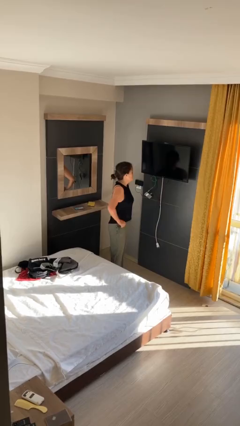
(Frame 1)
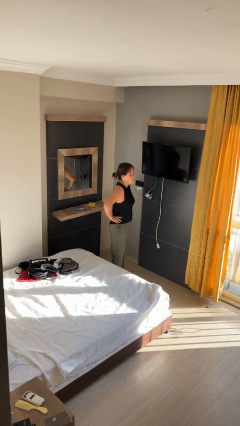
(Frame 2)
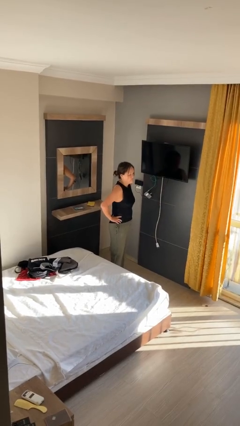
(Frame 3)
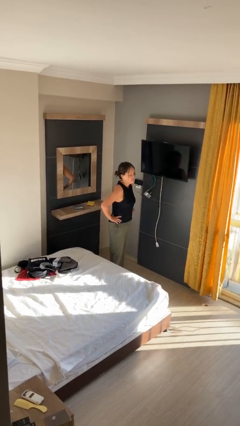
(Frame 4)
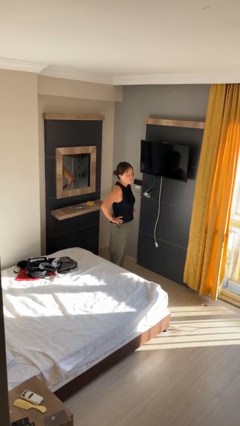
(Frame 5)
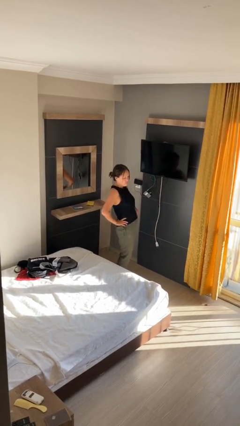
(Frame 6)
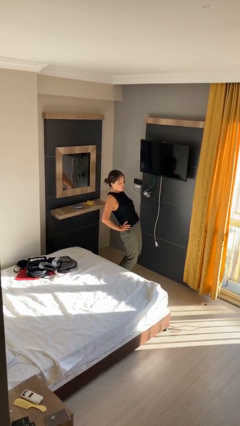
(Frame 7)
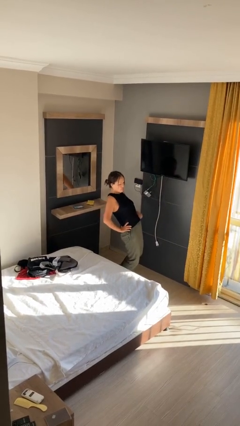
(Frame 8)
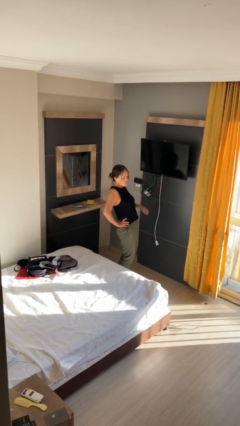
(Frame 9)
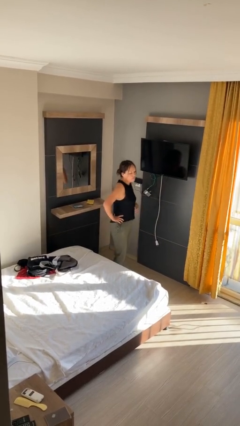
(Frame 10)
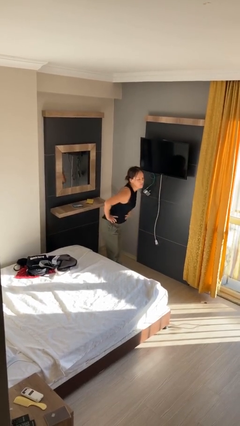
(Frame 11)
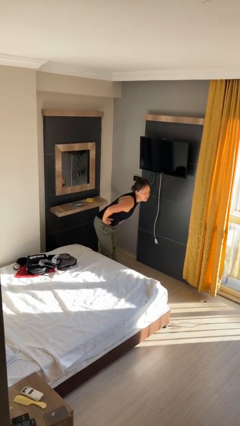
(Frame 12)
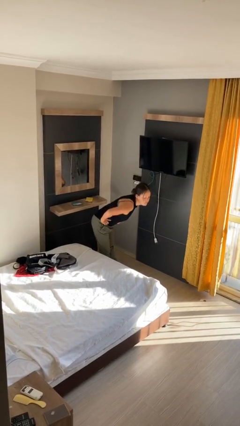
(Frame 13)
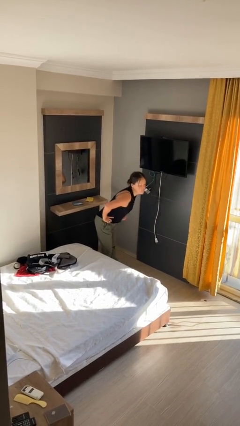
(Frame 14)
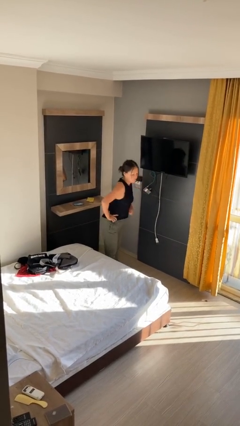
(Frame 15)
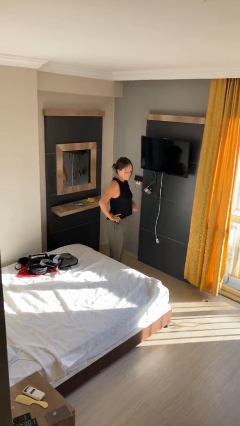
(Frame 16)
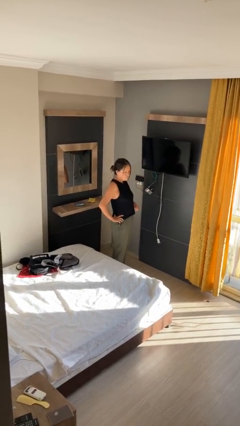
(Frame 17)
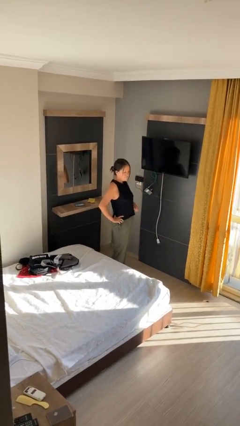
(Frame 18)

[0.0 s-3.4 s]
person wiggles hips

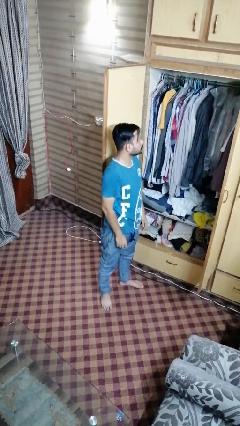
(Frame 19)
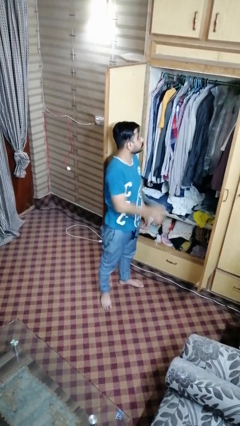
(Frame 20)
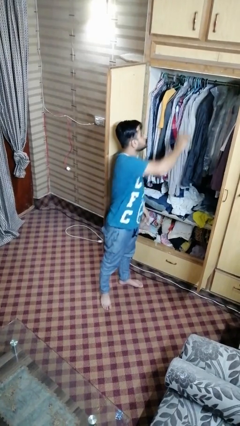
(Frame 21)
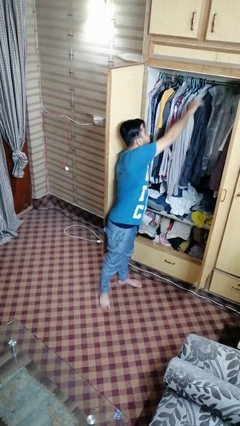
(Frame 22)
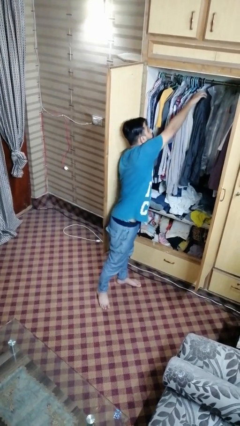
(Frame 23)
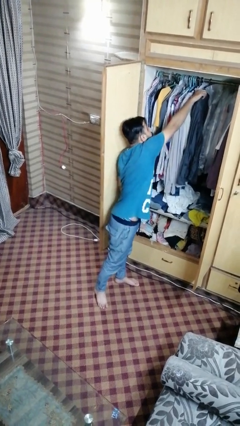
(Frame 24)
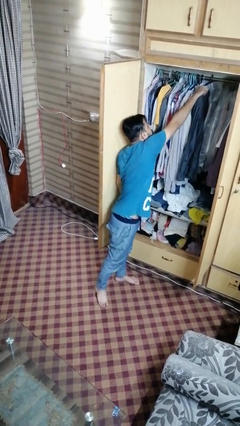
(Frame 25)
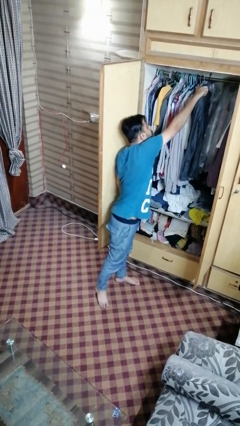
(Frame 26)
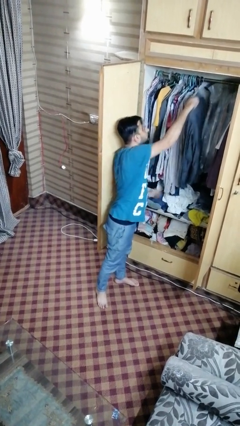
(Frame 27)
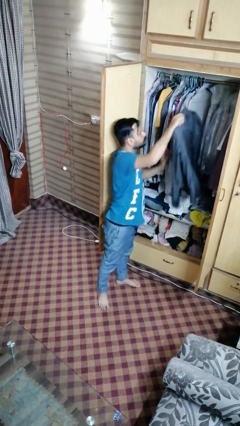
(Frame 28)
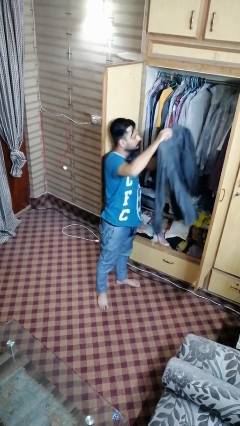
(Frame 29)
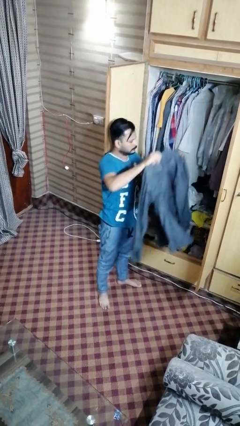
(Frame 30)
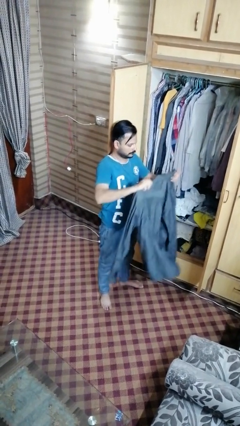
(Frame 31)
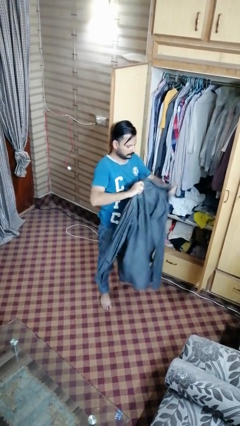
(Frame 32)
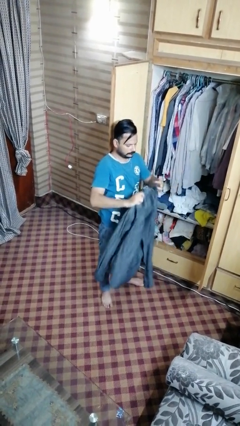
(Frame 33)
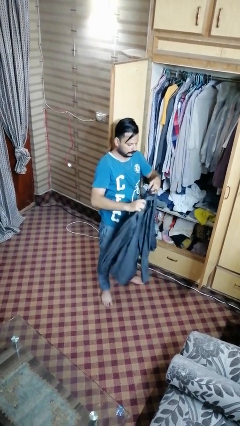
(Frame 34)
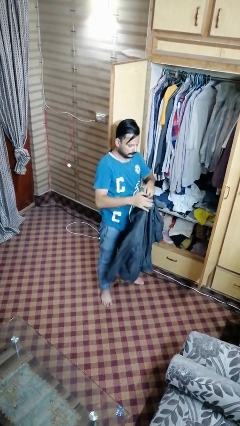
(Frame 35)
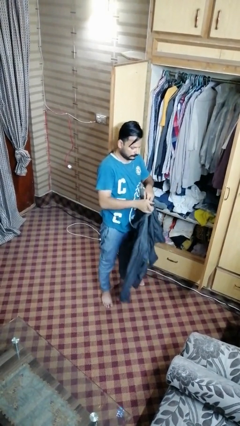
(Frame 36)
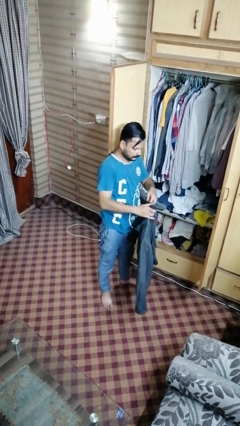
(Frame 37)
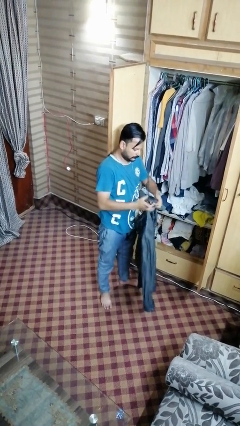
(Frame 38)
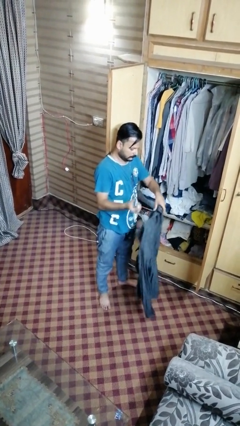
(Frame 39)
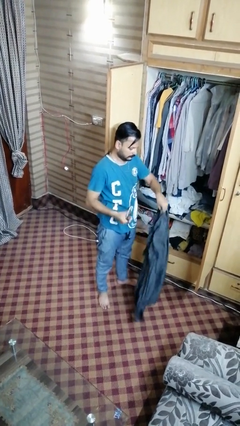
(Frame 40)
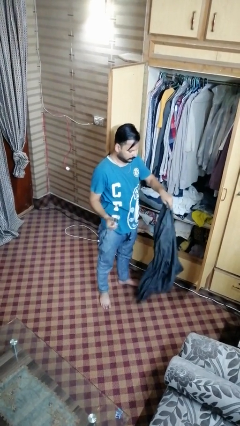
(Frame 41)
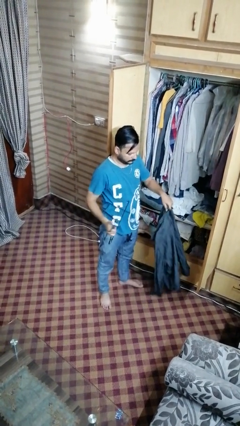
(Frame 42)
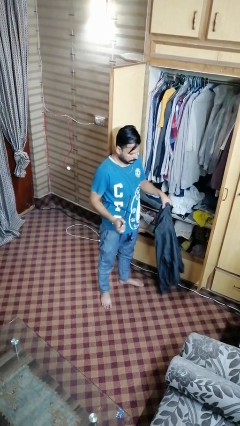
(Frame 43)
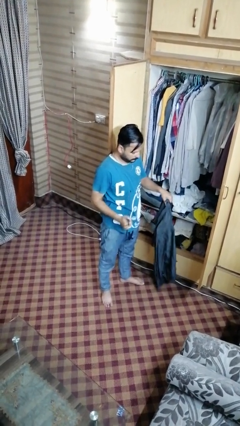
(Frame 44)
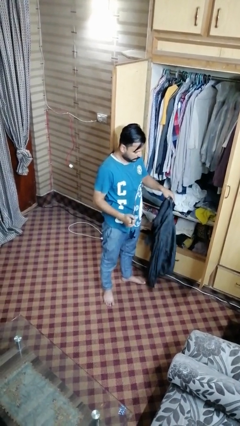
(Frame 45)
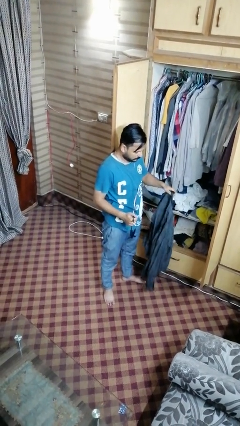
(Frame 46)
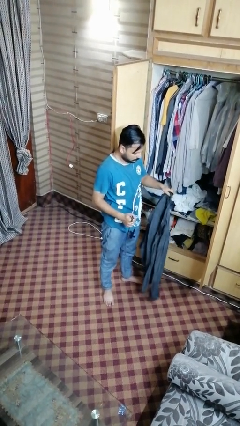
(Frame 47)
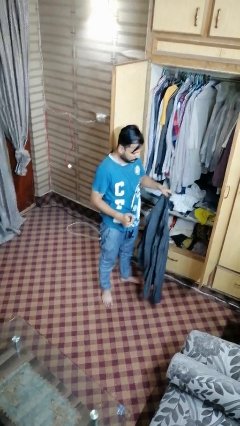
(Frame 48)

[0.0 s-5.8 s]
person takes clothes from dresser

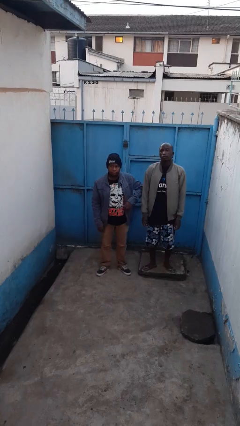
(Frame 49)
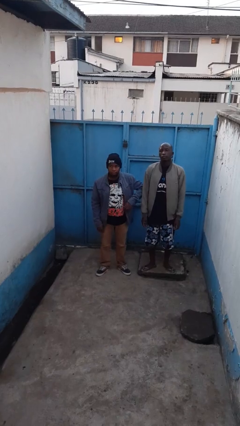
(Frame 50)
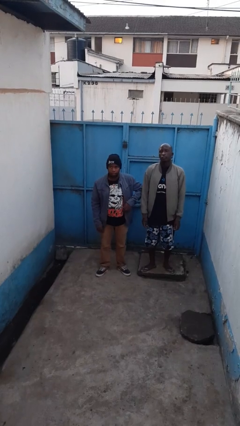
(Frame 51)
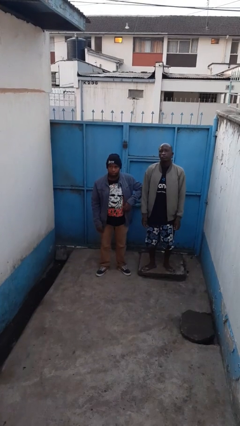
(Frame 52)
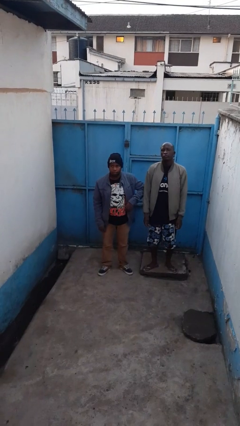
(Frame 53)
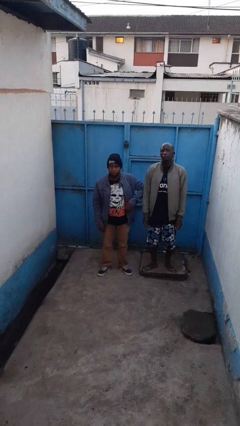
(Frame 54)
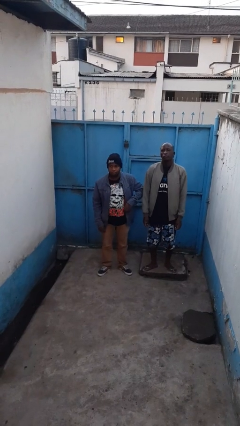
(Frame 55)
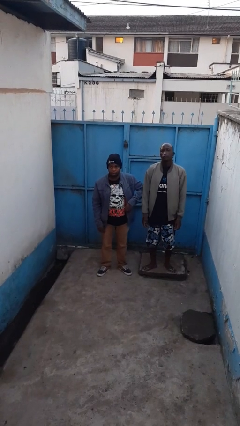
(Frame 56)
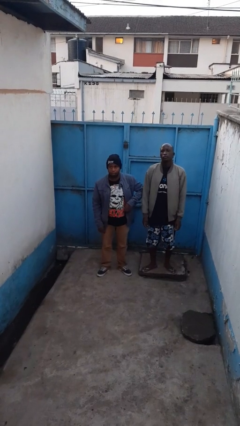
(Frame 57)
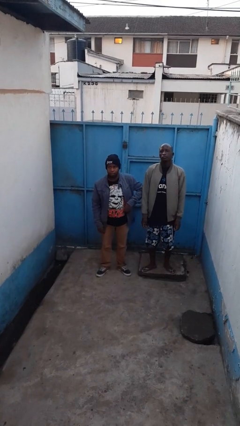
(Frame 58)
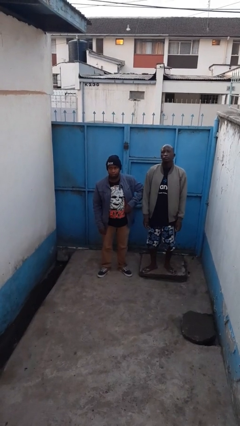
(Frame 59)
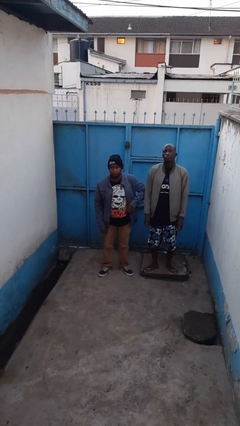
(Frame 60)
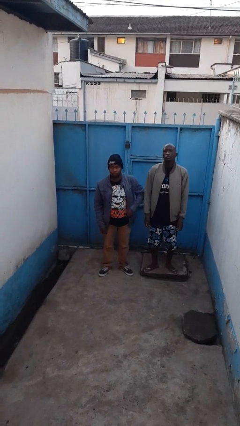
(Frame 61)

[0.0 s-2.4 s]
person nudges person with elbow

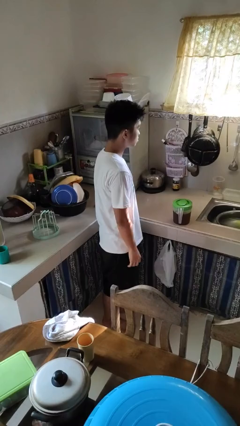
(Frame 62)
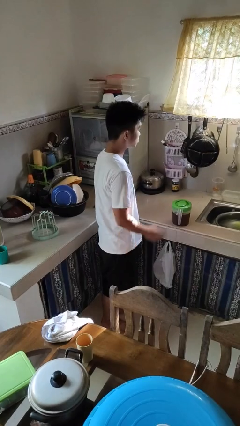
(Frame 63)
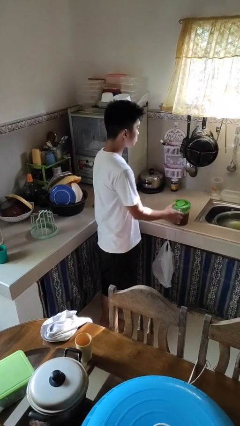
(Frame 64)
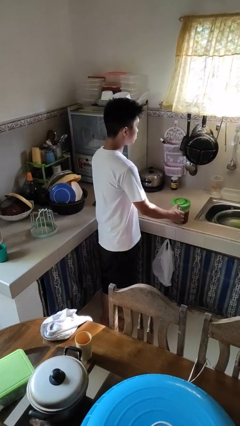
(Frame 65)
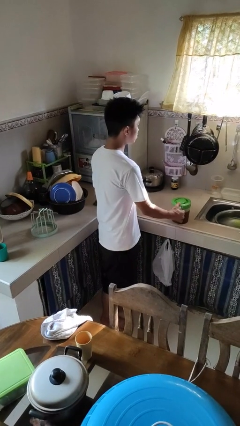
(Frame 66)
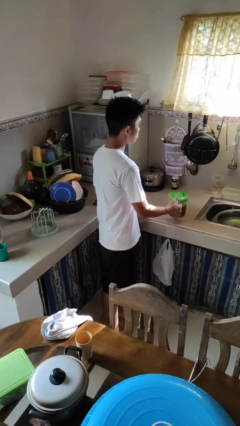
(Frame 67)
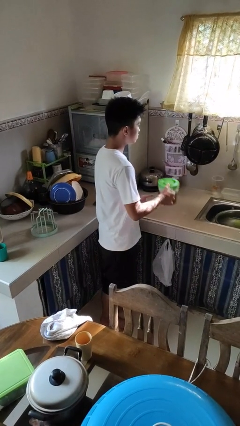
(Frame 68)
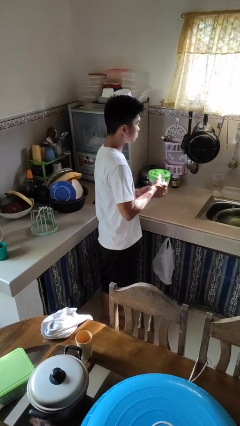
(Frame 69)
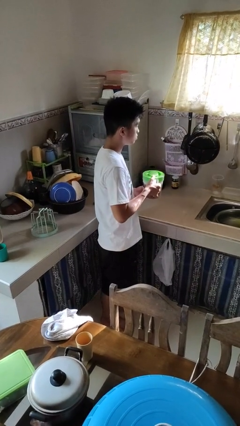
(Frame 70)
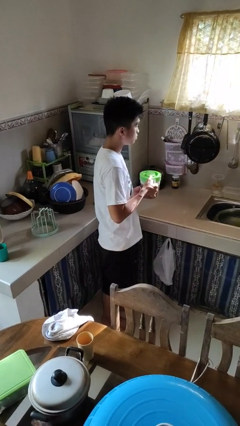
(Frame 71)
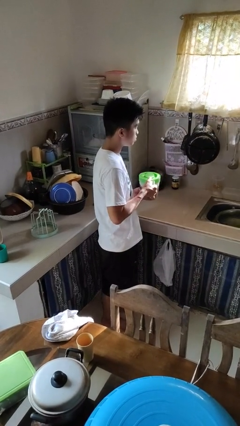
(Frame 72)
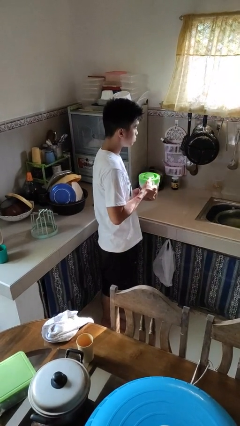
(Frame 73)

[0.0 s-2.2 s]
person picks up object from countertop

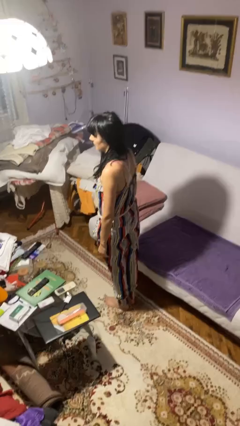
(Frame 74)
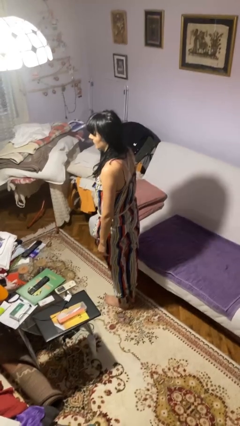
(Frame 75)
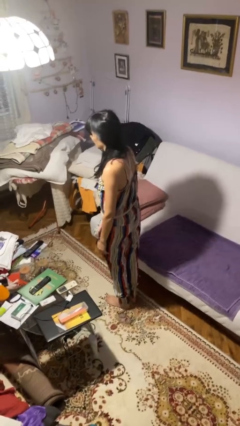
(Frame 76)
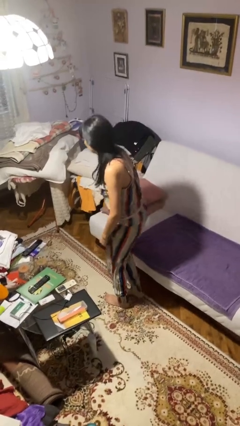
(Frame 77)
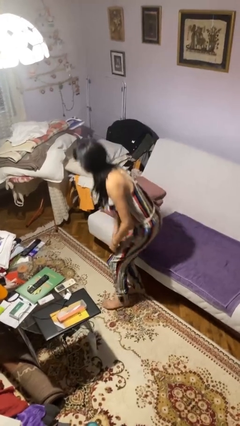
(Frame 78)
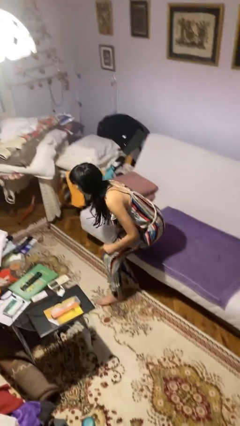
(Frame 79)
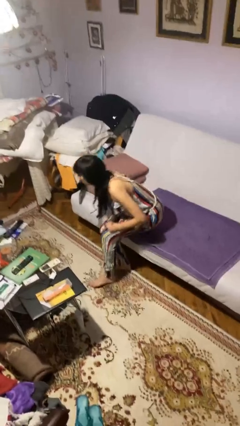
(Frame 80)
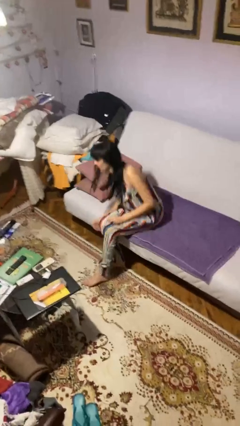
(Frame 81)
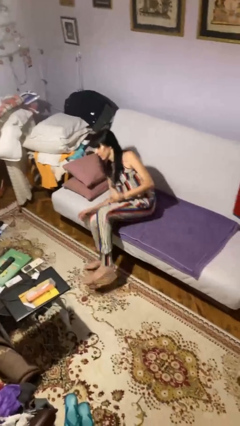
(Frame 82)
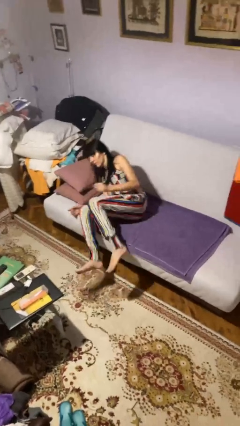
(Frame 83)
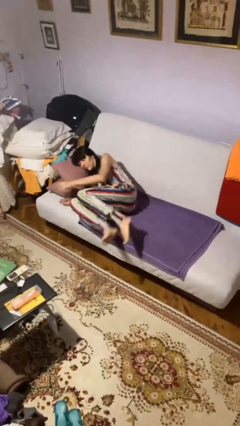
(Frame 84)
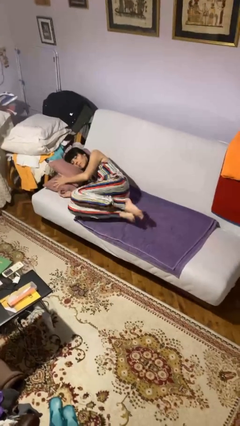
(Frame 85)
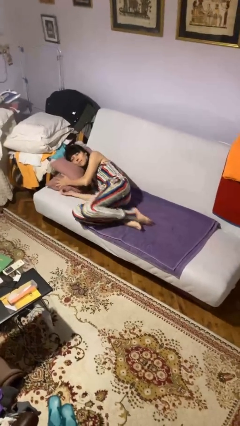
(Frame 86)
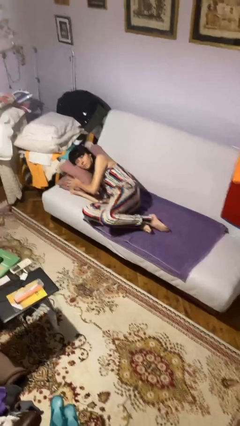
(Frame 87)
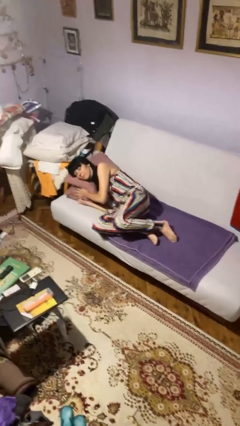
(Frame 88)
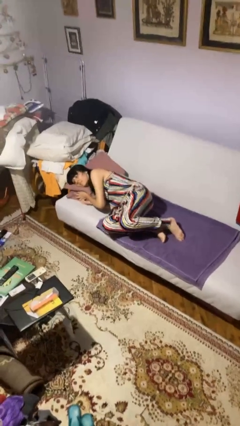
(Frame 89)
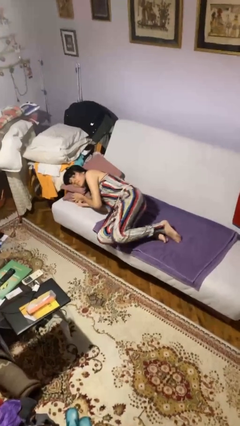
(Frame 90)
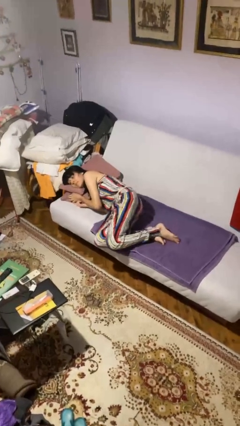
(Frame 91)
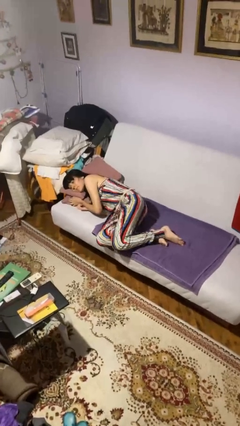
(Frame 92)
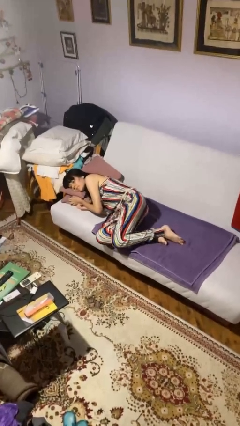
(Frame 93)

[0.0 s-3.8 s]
person lies down on bed
